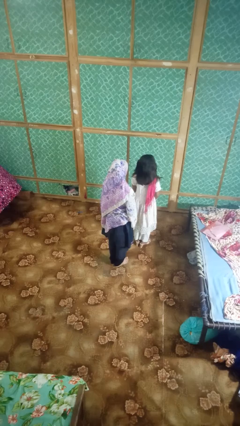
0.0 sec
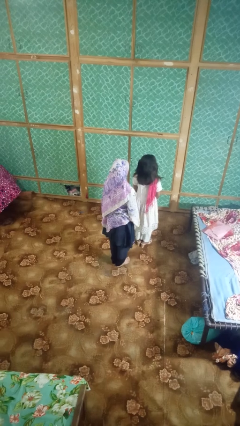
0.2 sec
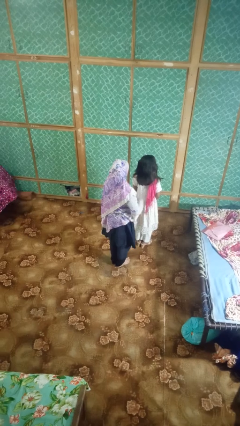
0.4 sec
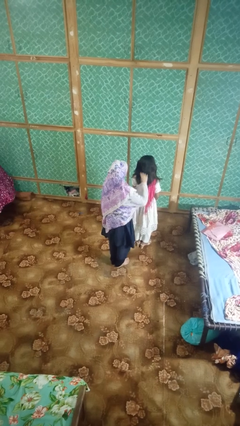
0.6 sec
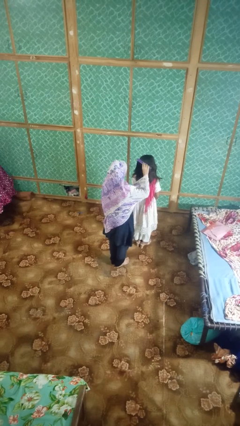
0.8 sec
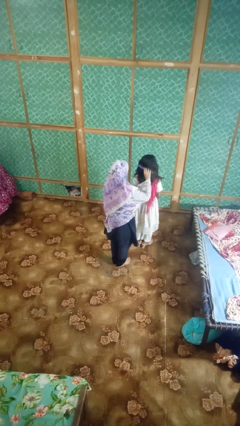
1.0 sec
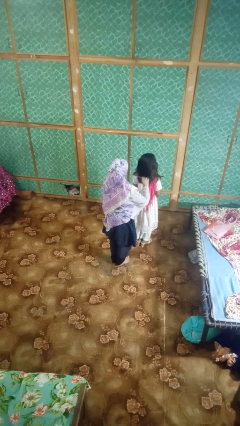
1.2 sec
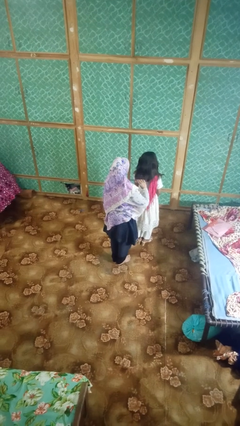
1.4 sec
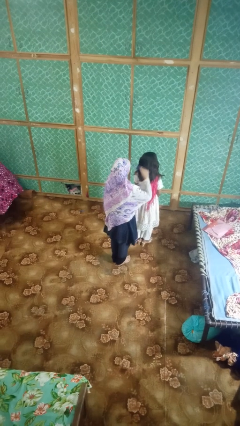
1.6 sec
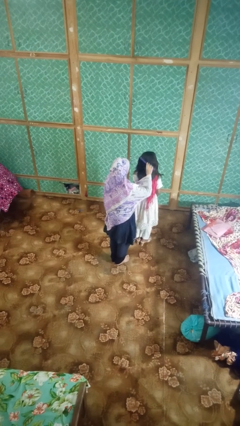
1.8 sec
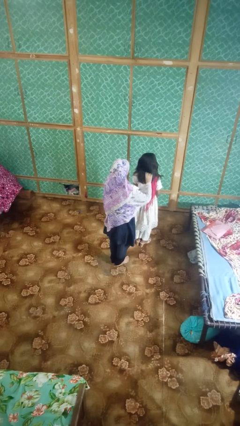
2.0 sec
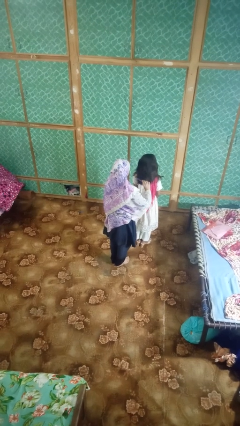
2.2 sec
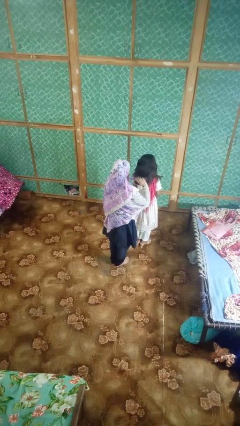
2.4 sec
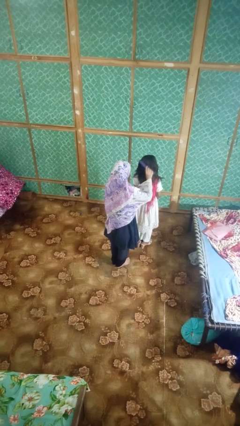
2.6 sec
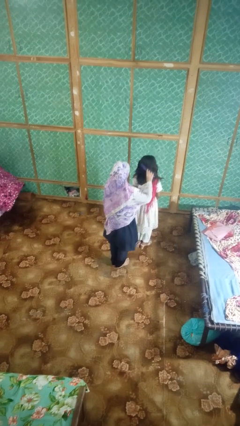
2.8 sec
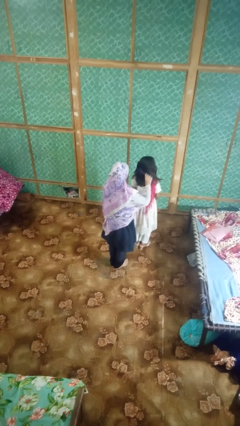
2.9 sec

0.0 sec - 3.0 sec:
person brushes hair of person

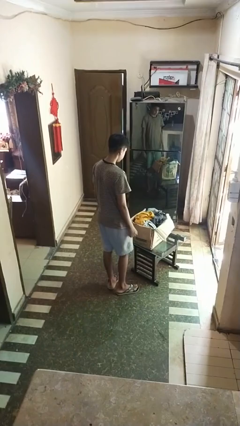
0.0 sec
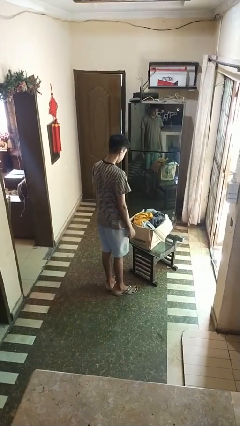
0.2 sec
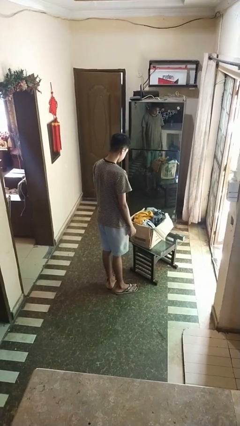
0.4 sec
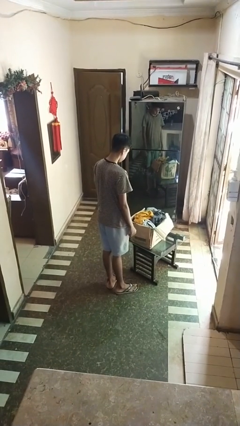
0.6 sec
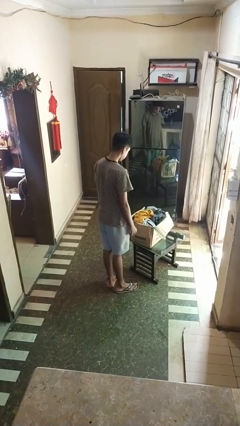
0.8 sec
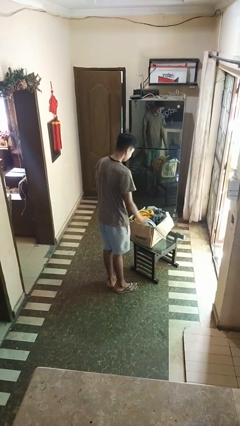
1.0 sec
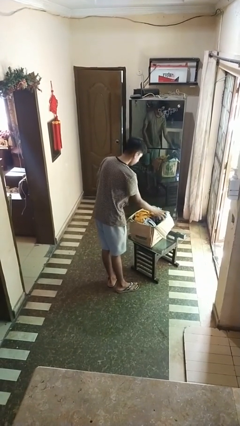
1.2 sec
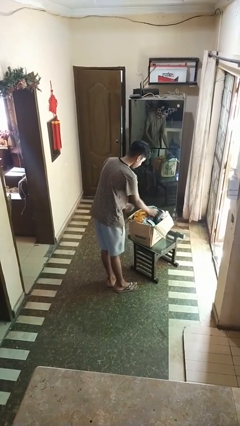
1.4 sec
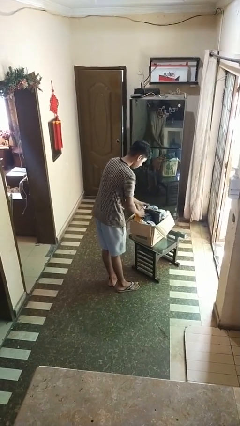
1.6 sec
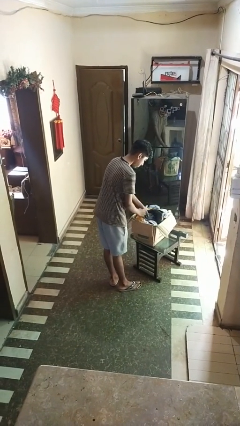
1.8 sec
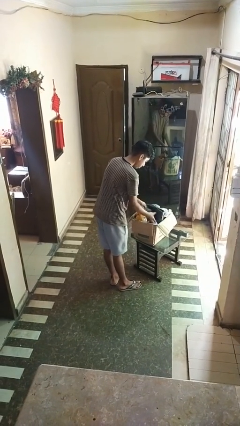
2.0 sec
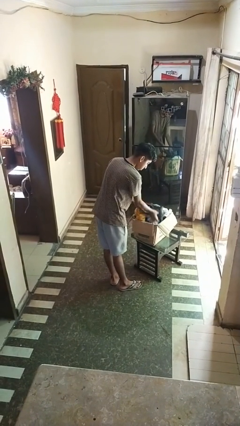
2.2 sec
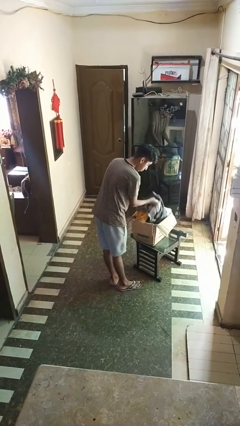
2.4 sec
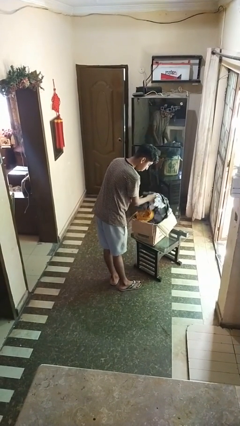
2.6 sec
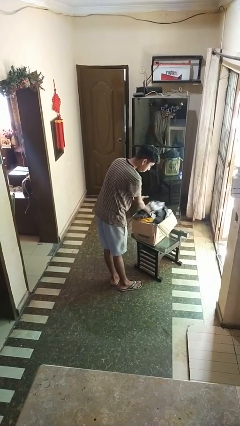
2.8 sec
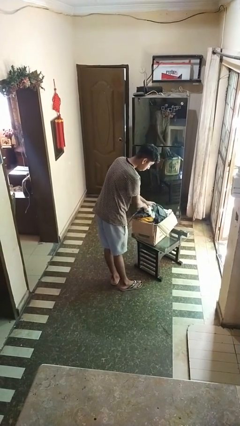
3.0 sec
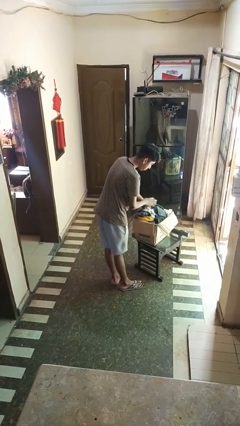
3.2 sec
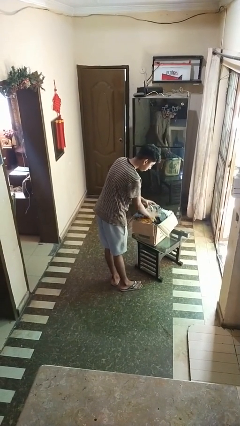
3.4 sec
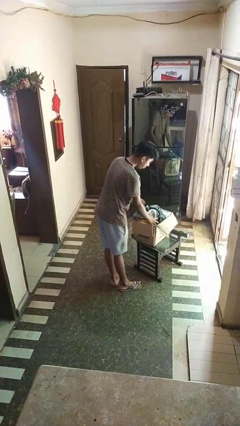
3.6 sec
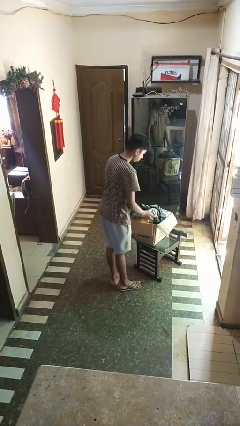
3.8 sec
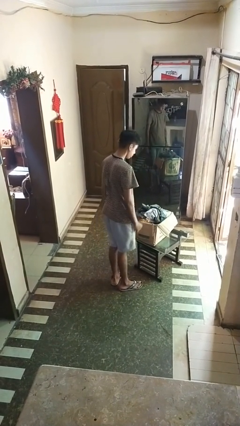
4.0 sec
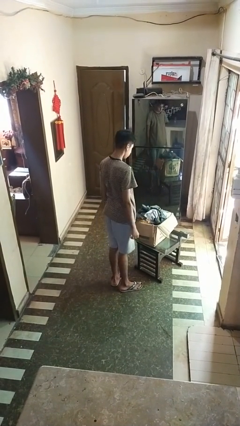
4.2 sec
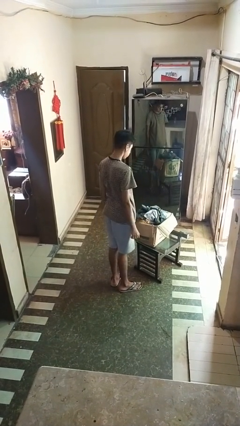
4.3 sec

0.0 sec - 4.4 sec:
person searches in box

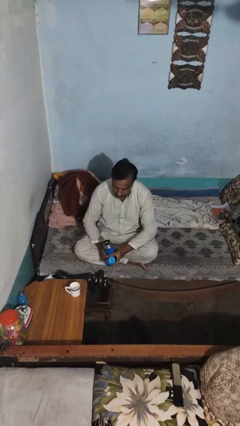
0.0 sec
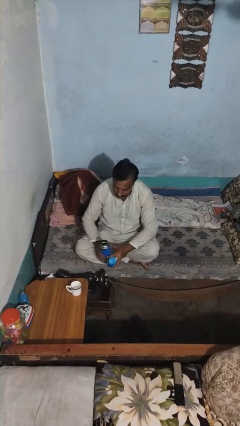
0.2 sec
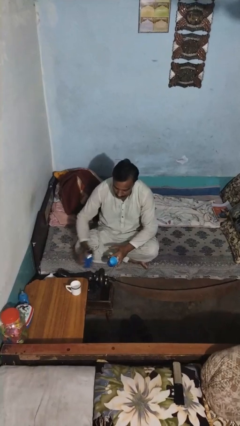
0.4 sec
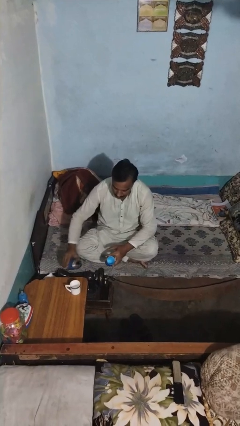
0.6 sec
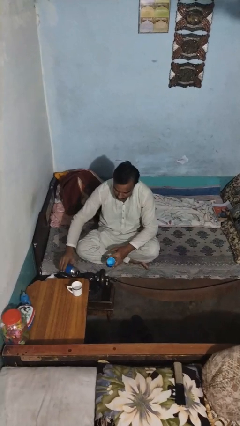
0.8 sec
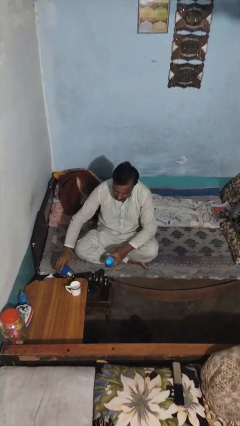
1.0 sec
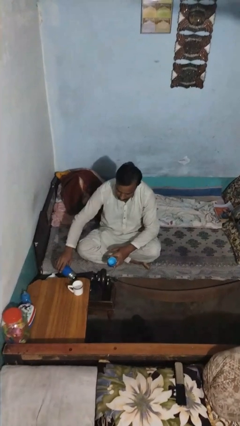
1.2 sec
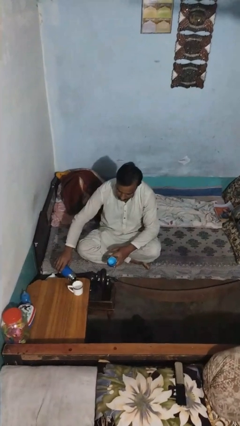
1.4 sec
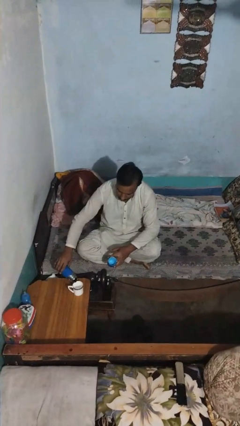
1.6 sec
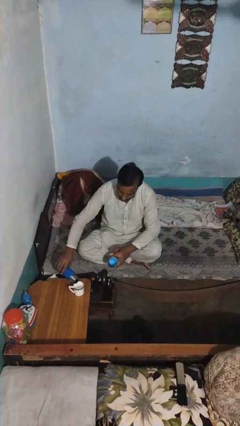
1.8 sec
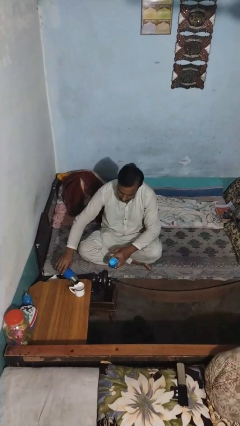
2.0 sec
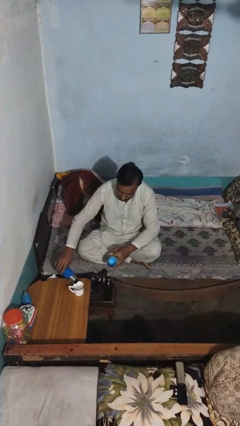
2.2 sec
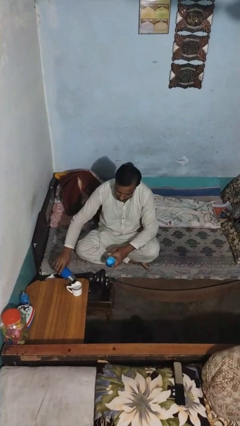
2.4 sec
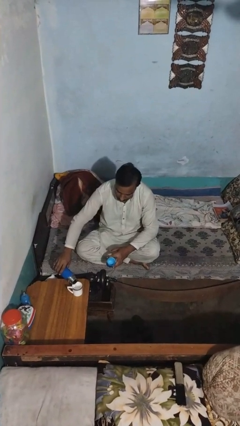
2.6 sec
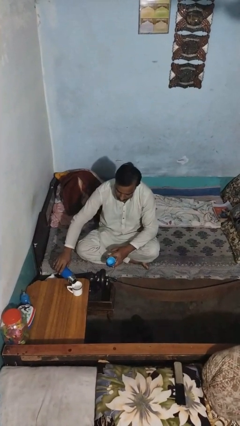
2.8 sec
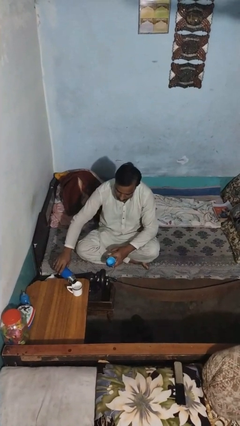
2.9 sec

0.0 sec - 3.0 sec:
person pours liquid into cup

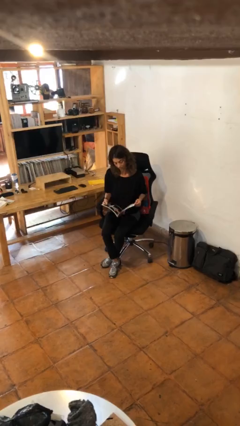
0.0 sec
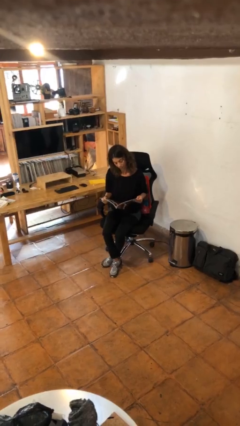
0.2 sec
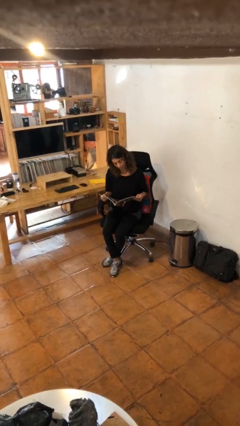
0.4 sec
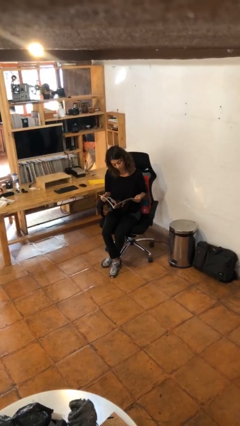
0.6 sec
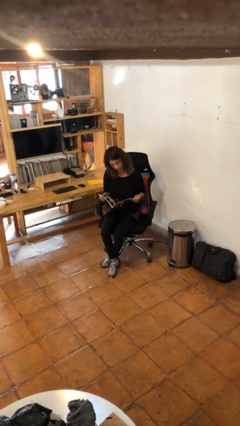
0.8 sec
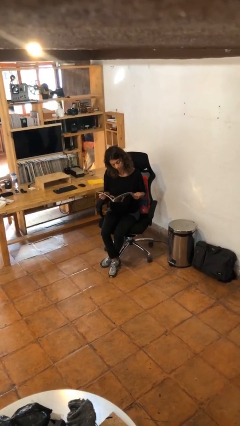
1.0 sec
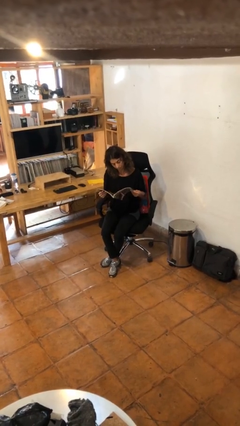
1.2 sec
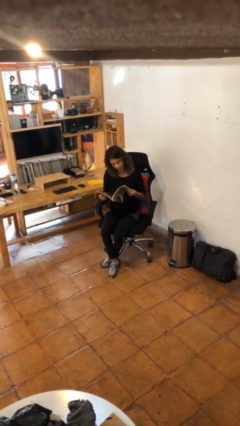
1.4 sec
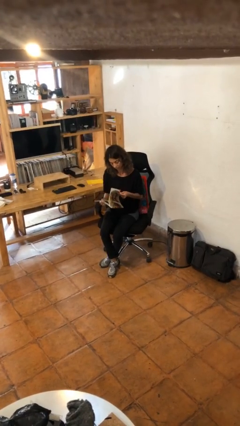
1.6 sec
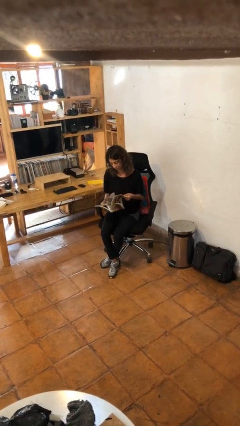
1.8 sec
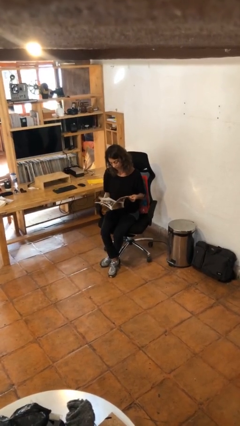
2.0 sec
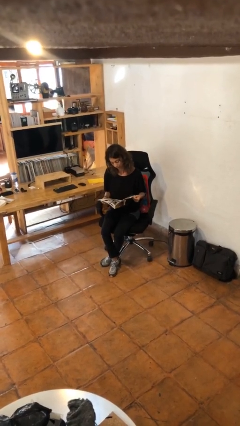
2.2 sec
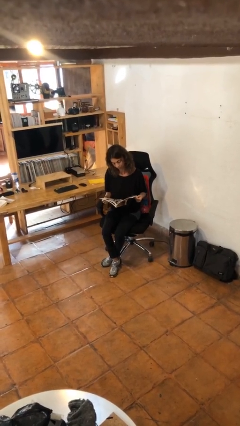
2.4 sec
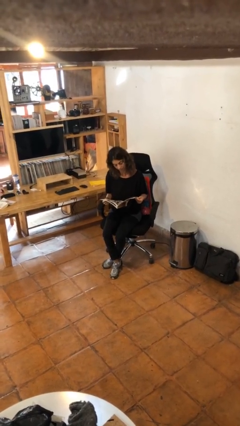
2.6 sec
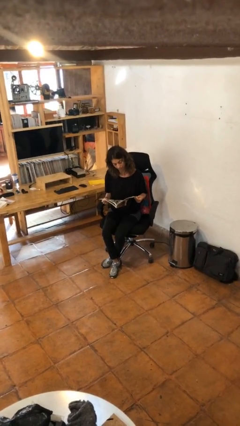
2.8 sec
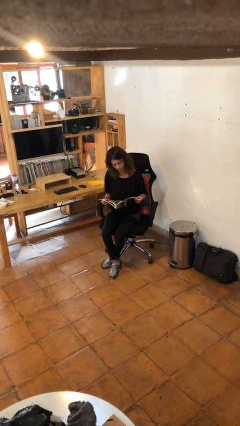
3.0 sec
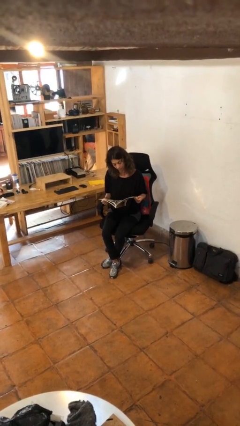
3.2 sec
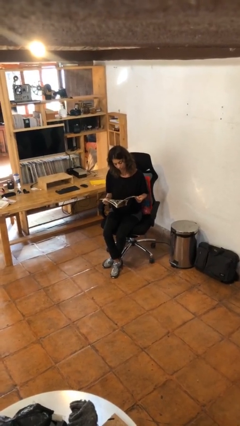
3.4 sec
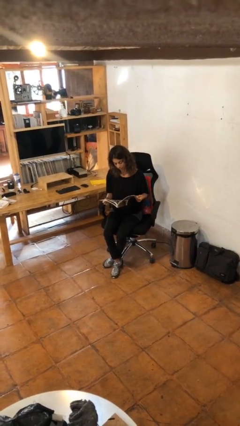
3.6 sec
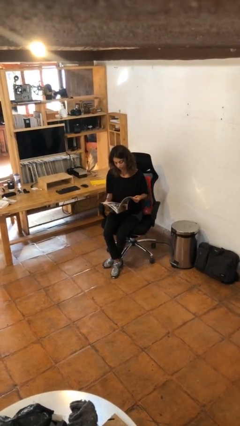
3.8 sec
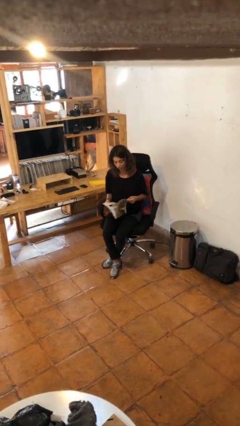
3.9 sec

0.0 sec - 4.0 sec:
person reads magazine

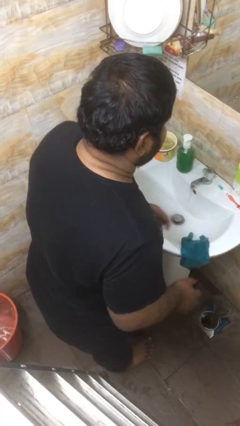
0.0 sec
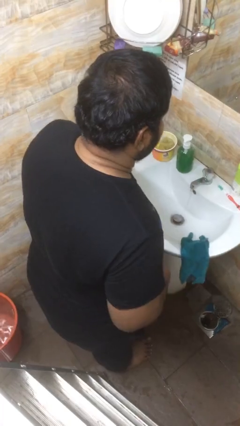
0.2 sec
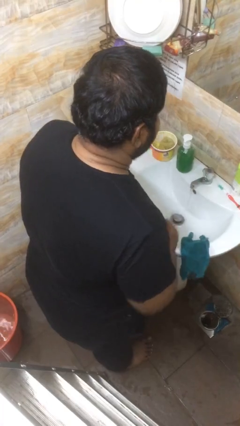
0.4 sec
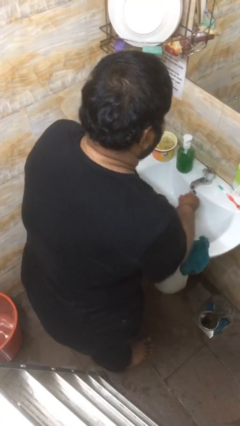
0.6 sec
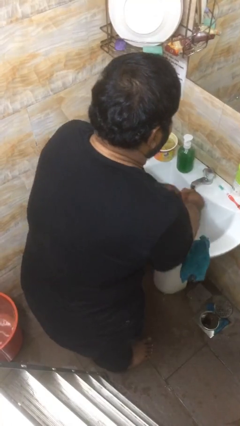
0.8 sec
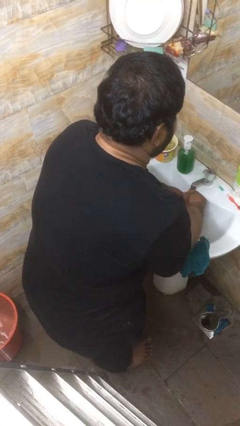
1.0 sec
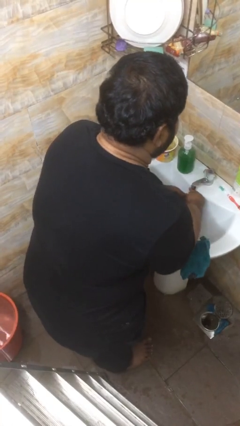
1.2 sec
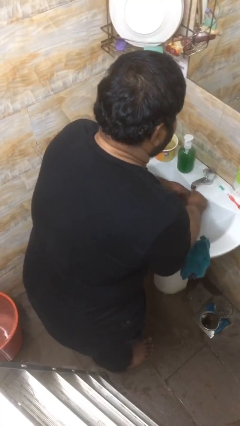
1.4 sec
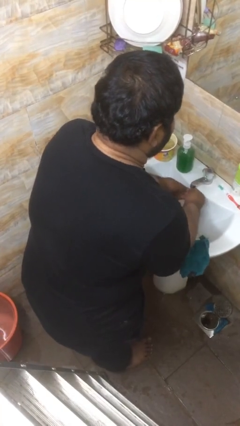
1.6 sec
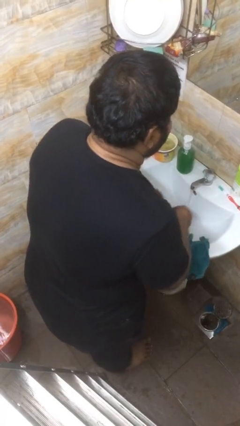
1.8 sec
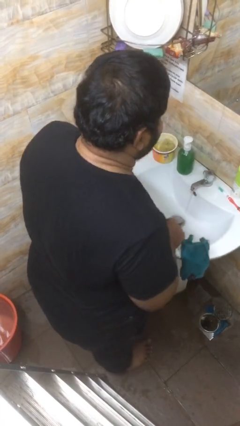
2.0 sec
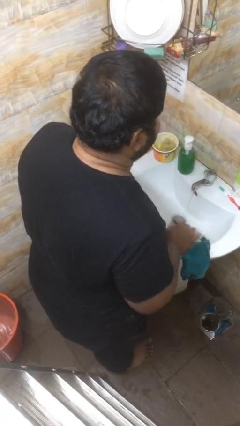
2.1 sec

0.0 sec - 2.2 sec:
person washes hands

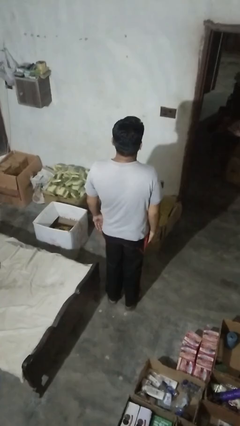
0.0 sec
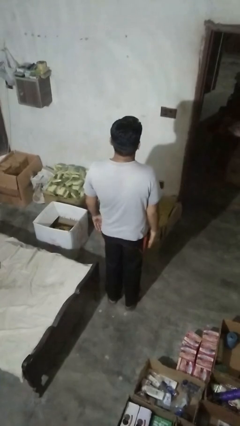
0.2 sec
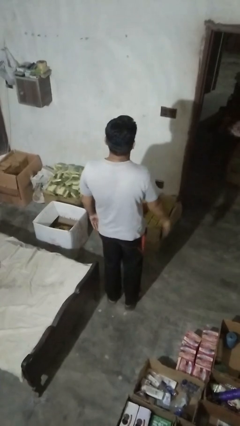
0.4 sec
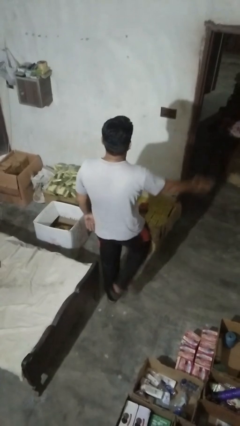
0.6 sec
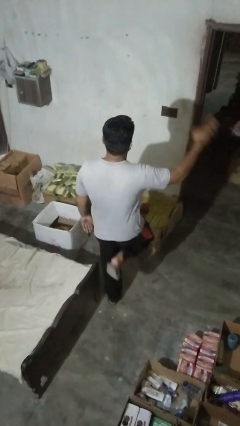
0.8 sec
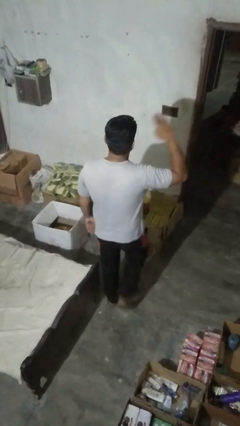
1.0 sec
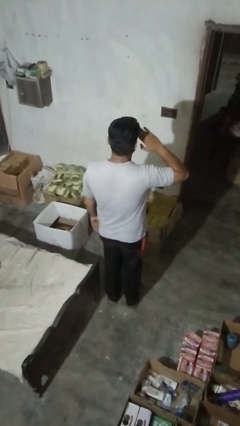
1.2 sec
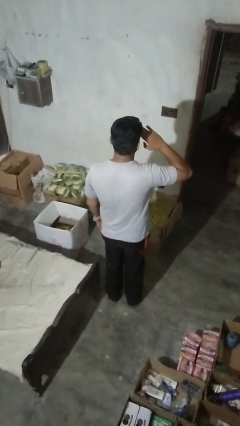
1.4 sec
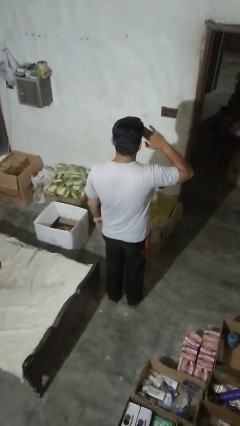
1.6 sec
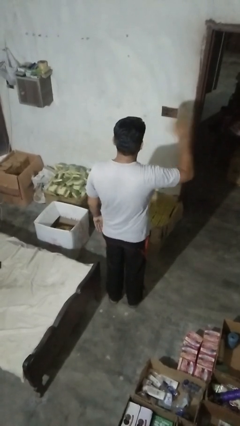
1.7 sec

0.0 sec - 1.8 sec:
person salutes
